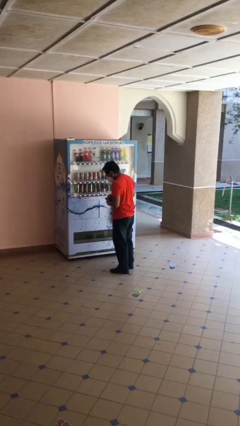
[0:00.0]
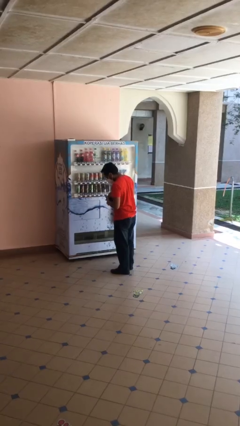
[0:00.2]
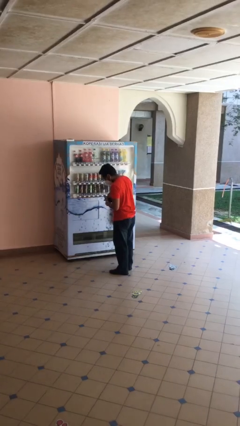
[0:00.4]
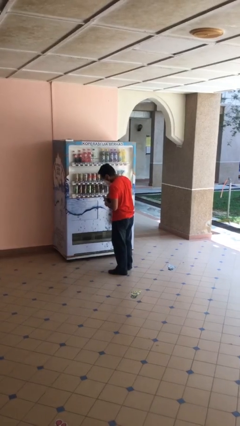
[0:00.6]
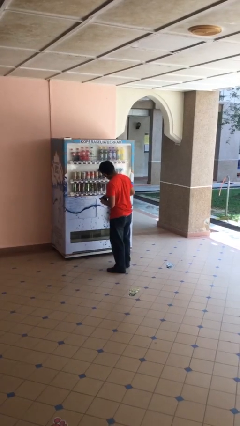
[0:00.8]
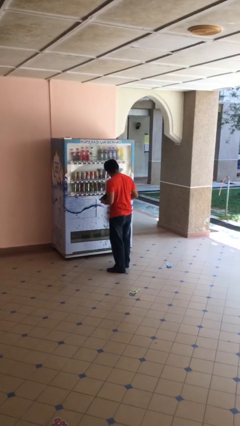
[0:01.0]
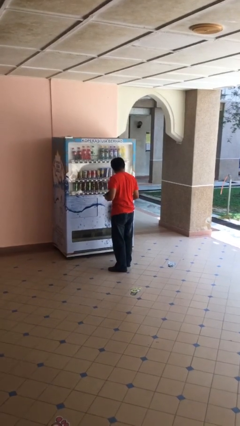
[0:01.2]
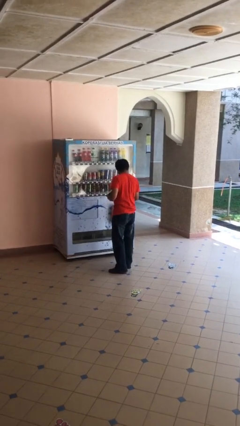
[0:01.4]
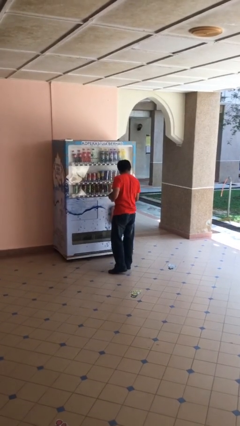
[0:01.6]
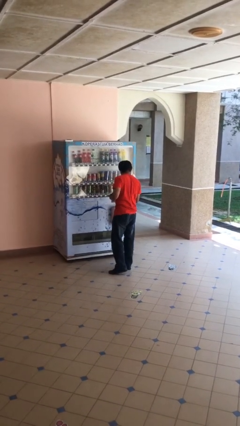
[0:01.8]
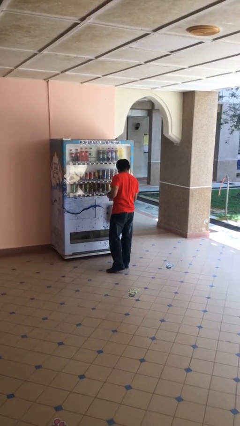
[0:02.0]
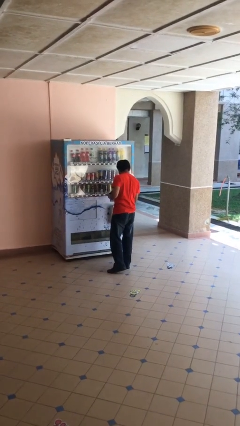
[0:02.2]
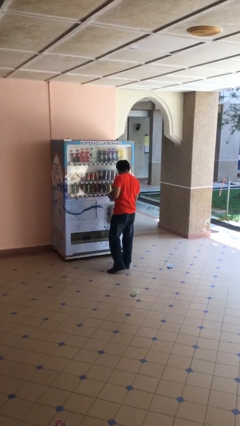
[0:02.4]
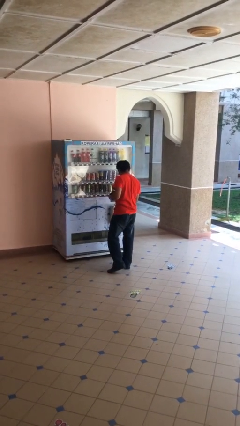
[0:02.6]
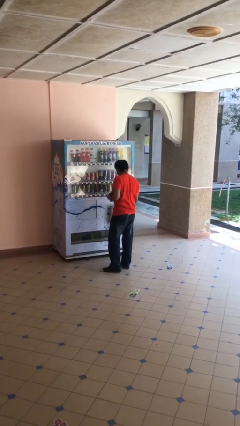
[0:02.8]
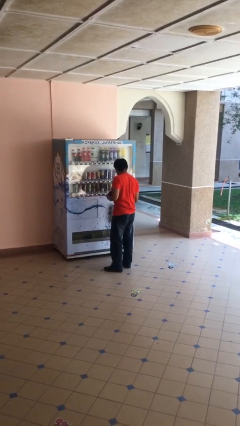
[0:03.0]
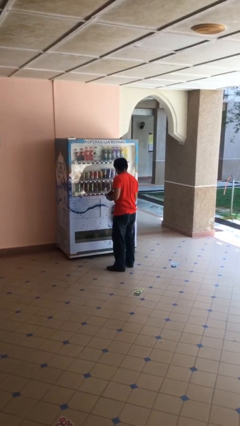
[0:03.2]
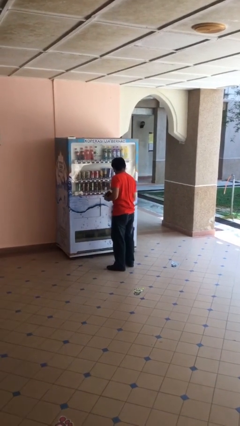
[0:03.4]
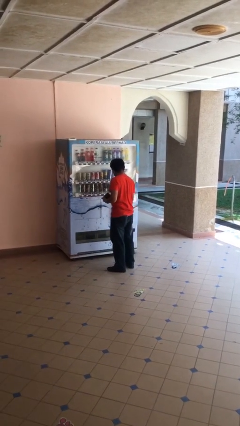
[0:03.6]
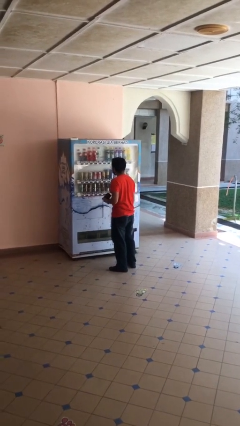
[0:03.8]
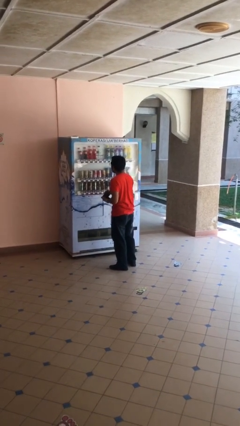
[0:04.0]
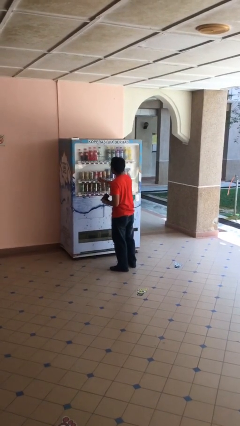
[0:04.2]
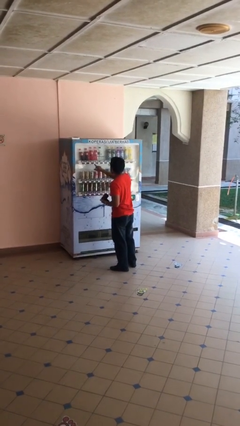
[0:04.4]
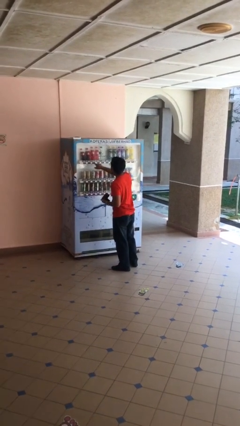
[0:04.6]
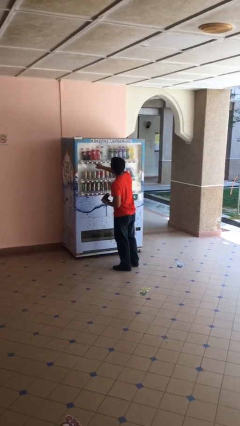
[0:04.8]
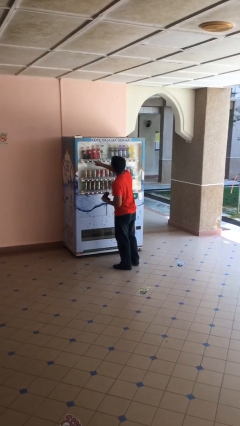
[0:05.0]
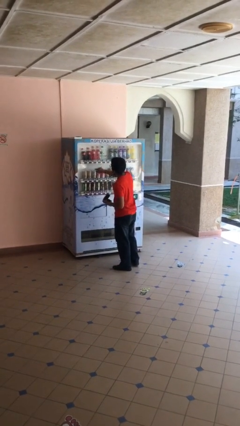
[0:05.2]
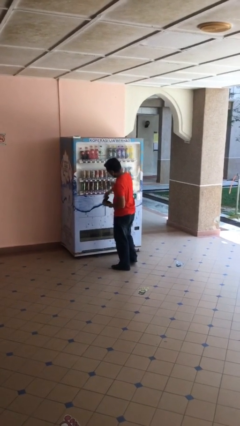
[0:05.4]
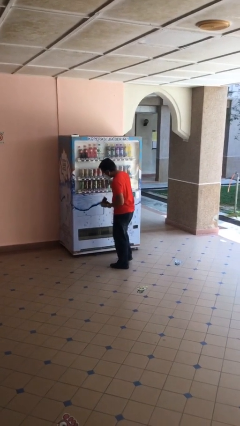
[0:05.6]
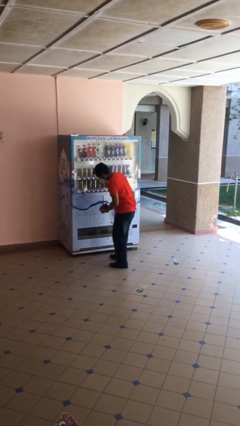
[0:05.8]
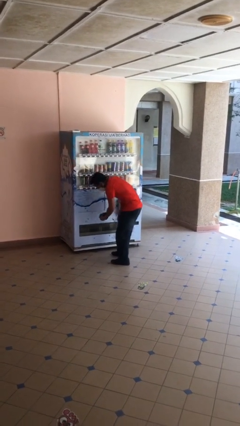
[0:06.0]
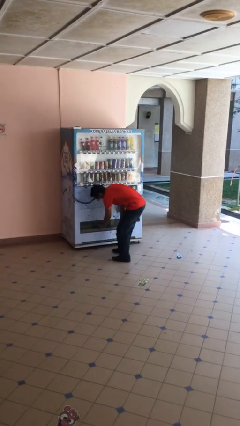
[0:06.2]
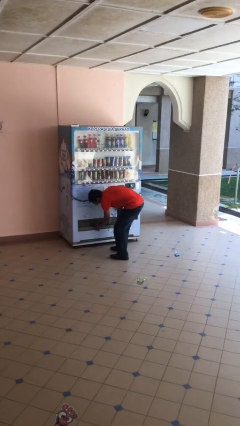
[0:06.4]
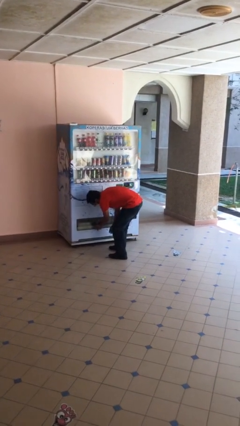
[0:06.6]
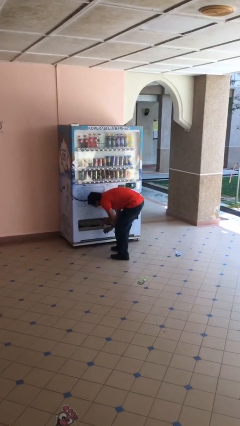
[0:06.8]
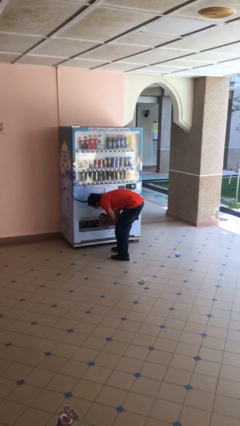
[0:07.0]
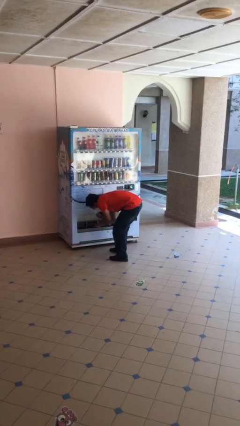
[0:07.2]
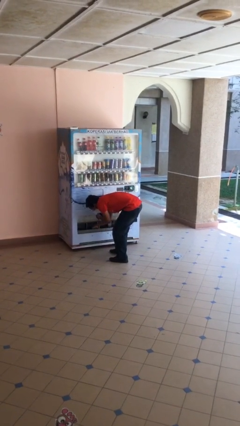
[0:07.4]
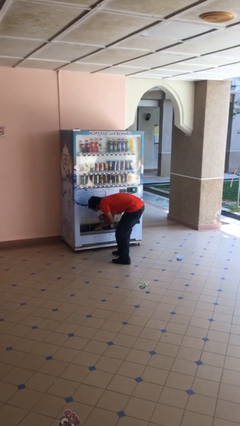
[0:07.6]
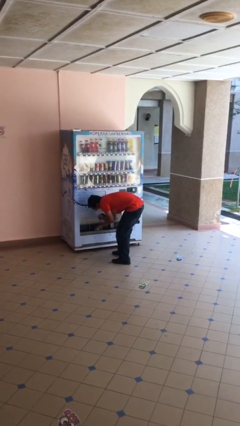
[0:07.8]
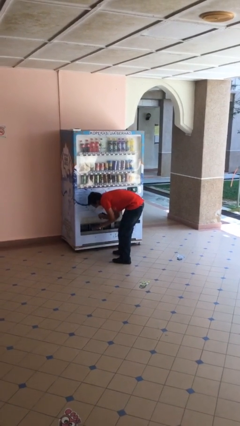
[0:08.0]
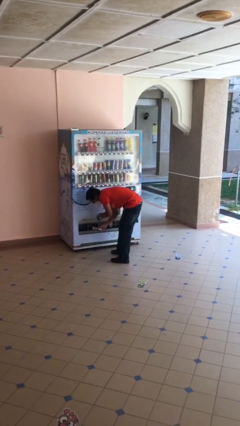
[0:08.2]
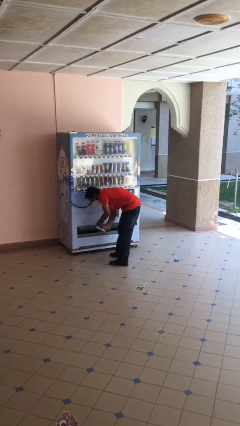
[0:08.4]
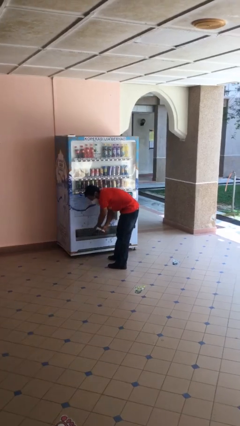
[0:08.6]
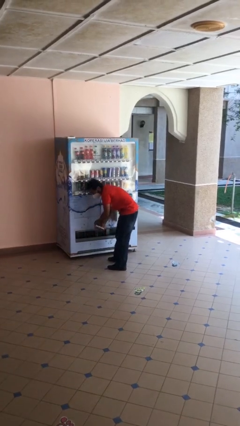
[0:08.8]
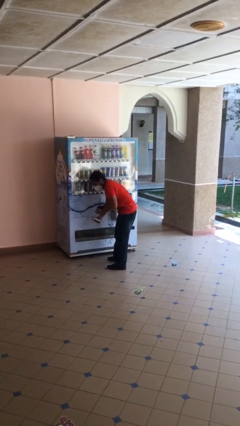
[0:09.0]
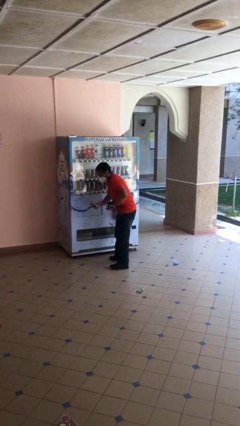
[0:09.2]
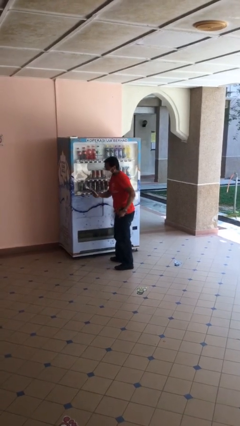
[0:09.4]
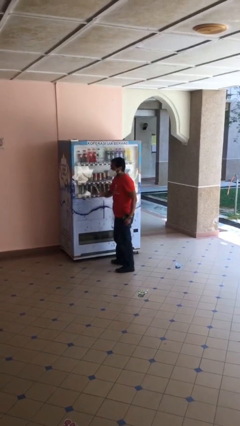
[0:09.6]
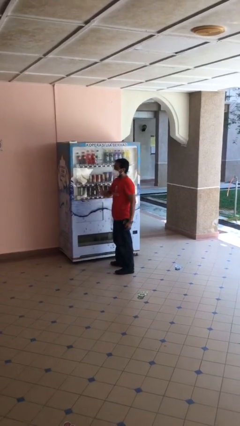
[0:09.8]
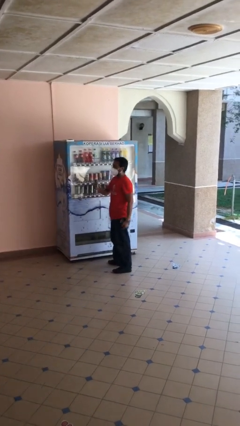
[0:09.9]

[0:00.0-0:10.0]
person purchases from machine

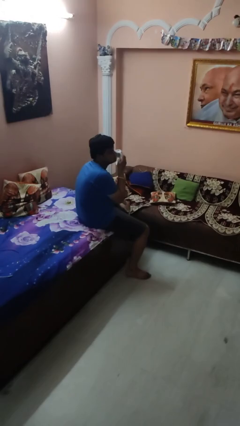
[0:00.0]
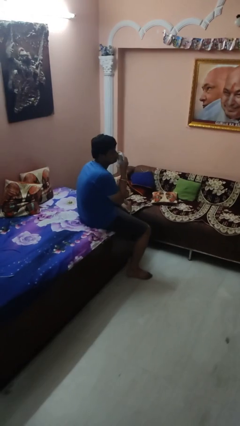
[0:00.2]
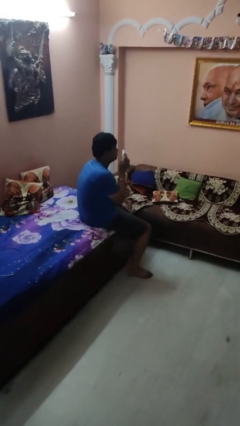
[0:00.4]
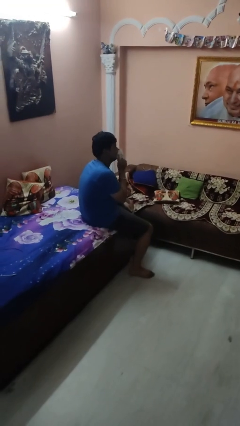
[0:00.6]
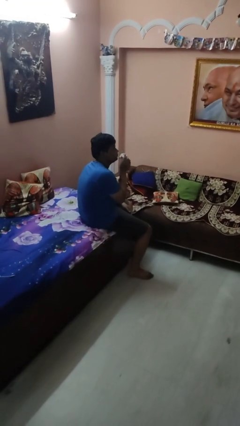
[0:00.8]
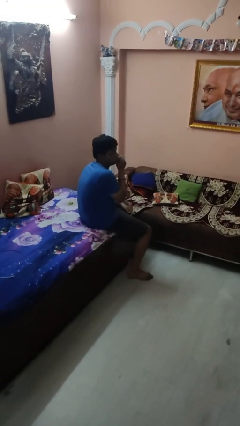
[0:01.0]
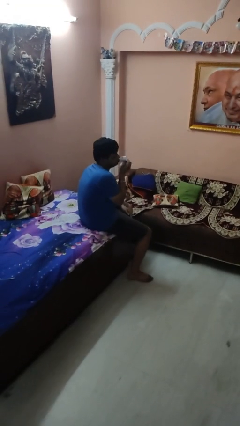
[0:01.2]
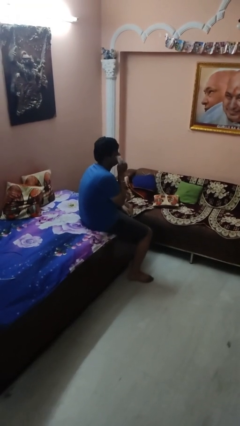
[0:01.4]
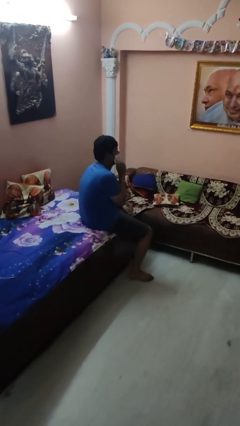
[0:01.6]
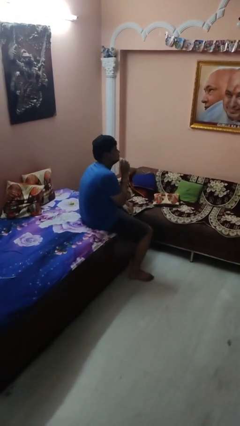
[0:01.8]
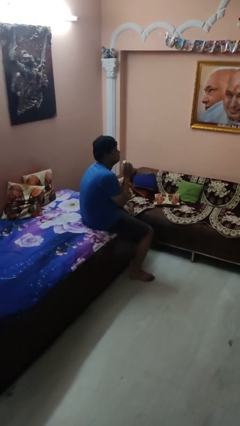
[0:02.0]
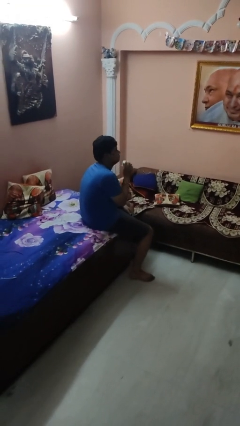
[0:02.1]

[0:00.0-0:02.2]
person wipes mouth with napkin

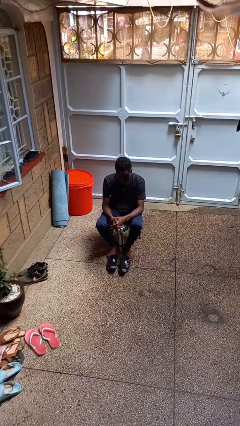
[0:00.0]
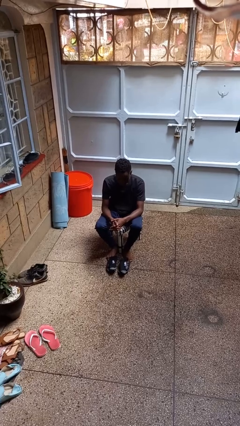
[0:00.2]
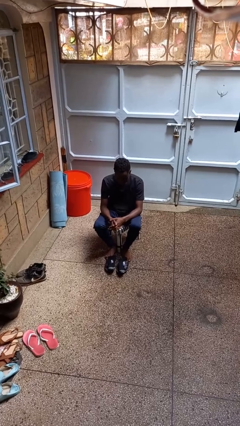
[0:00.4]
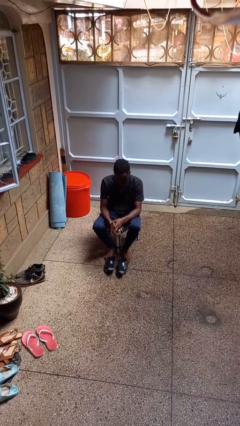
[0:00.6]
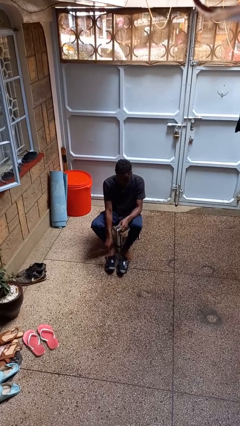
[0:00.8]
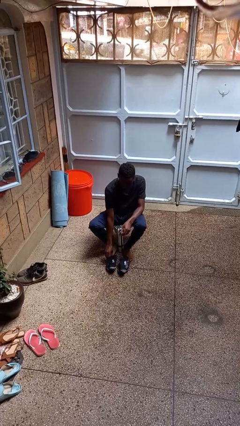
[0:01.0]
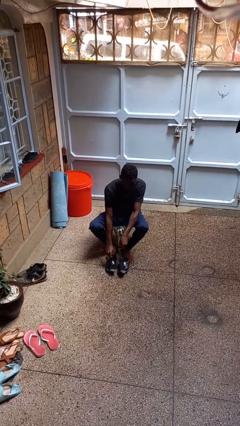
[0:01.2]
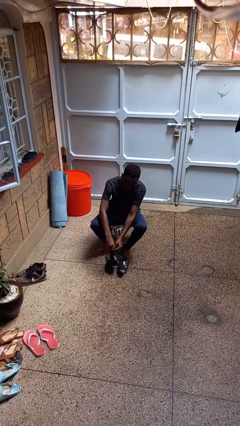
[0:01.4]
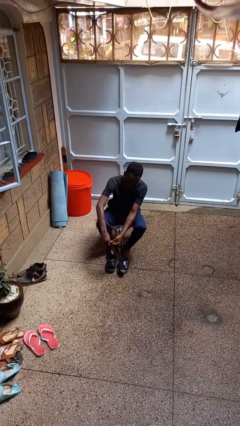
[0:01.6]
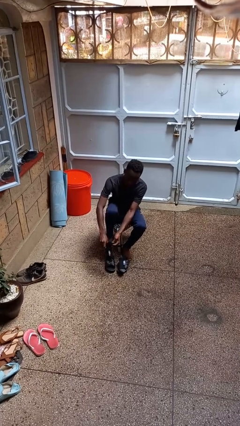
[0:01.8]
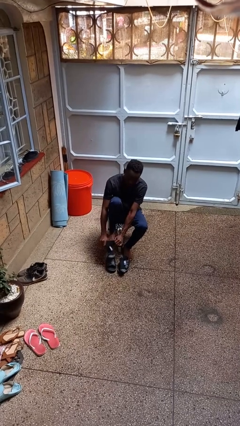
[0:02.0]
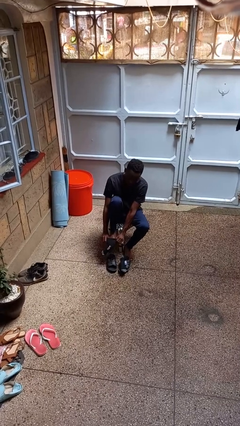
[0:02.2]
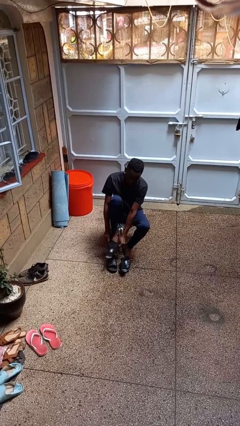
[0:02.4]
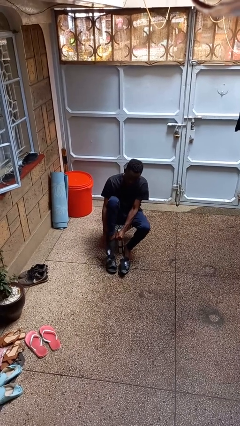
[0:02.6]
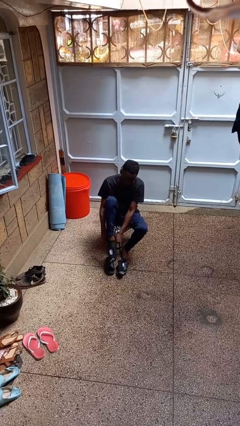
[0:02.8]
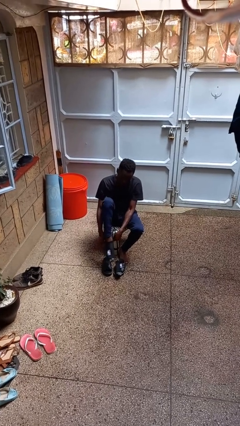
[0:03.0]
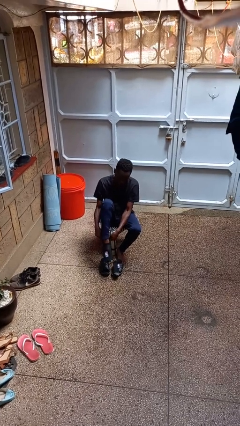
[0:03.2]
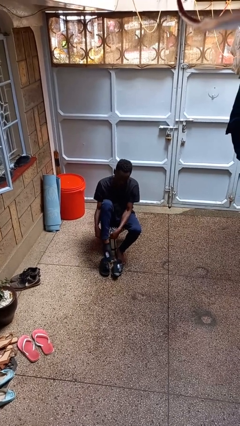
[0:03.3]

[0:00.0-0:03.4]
person puts on socks

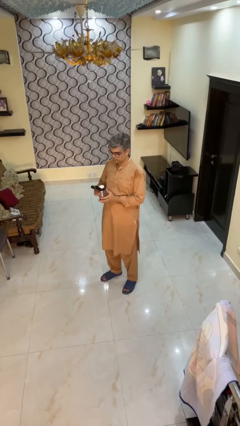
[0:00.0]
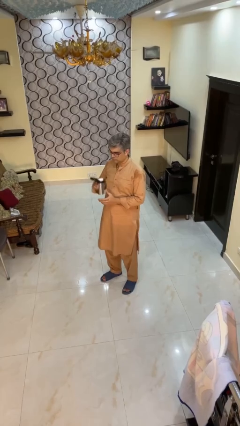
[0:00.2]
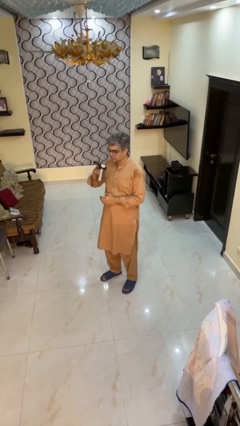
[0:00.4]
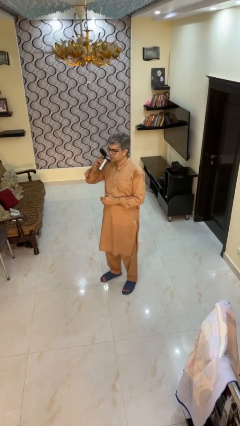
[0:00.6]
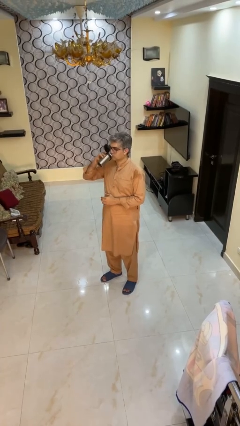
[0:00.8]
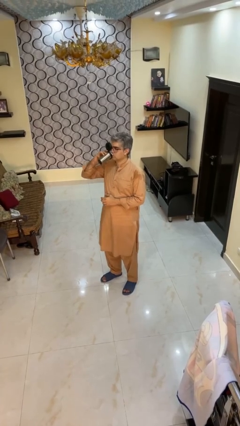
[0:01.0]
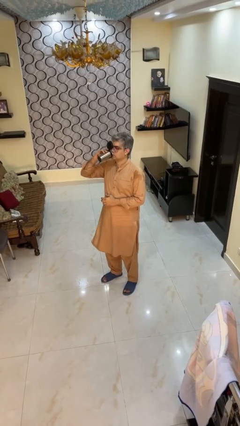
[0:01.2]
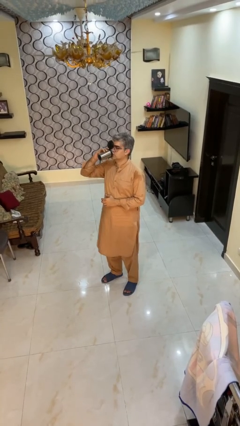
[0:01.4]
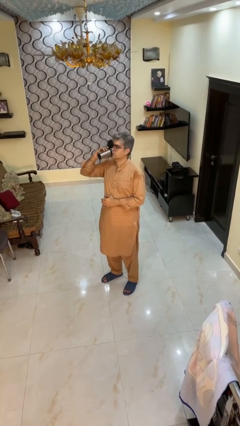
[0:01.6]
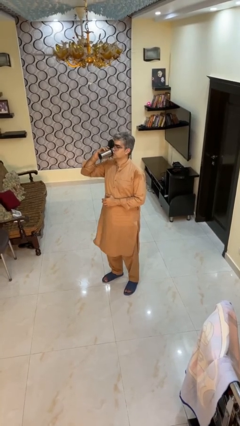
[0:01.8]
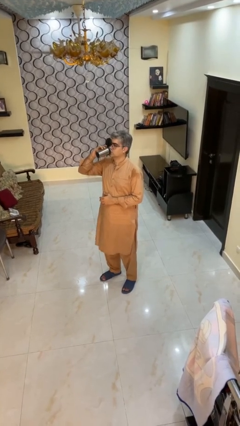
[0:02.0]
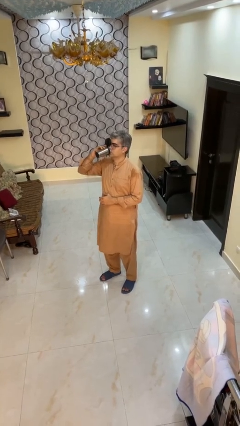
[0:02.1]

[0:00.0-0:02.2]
person drinks from beverage can
